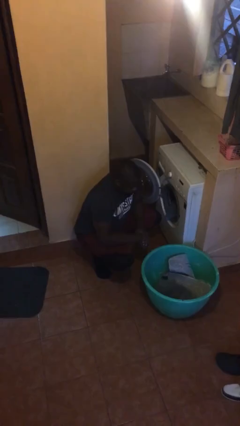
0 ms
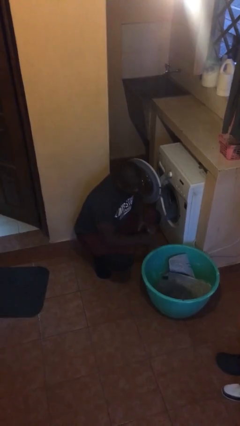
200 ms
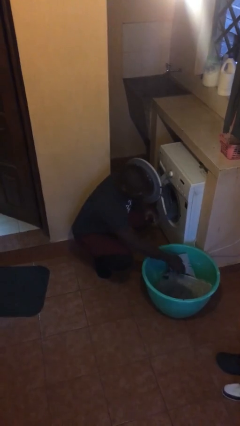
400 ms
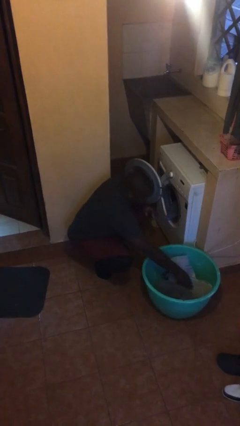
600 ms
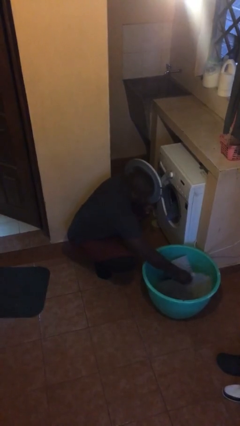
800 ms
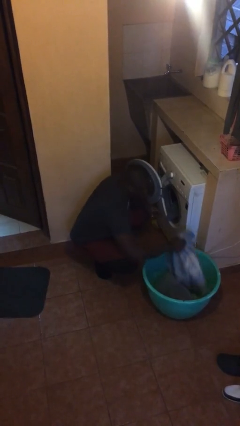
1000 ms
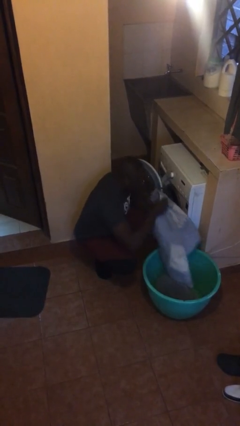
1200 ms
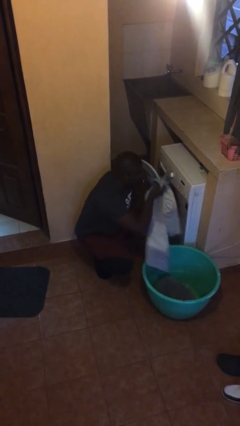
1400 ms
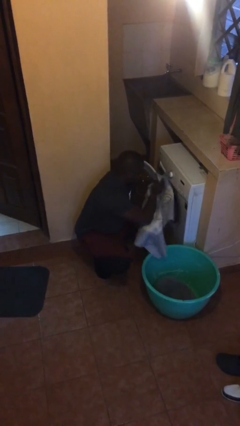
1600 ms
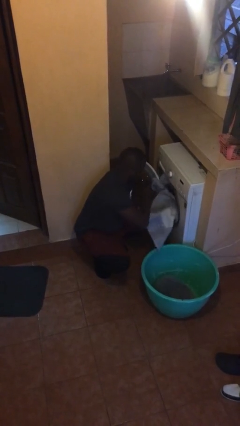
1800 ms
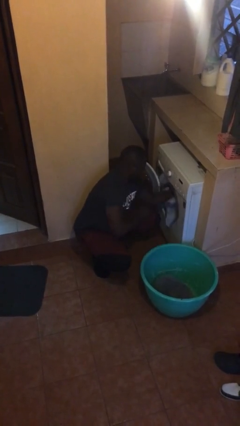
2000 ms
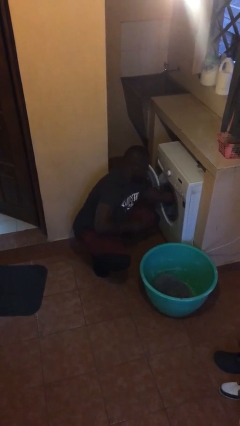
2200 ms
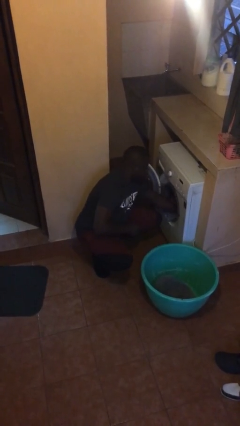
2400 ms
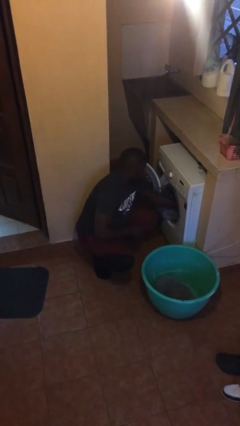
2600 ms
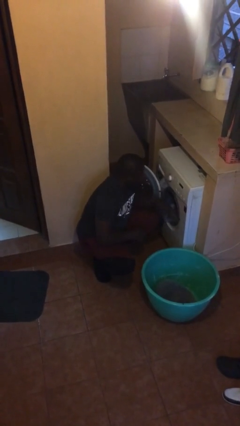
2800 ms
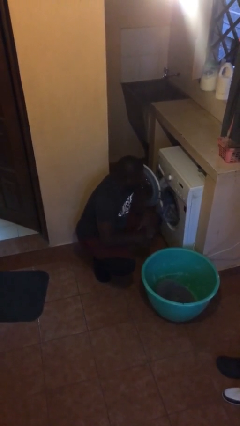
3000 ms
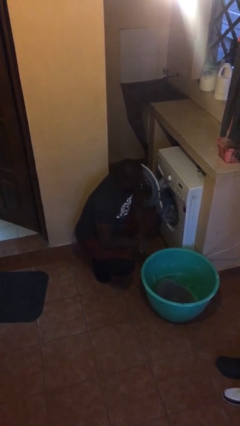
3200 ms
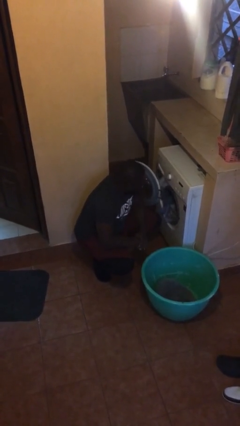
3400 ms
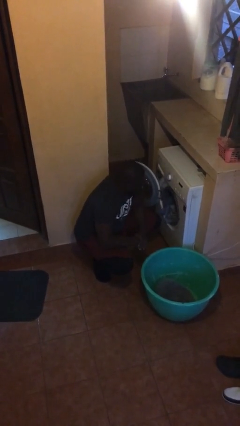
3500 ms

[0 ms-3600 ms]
person loads clotheswasher

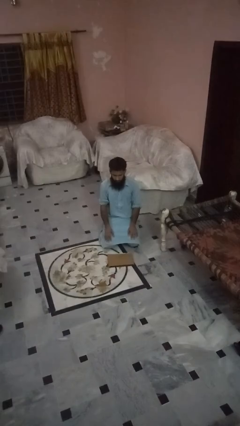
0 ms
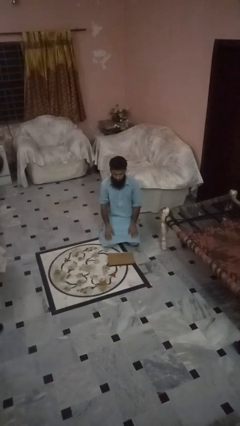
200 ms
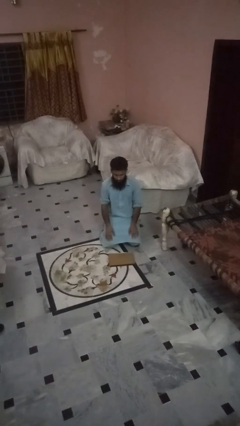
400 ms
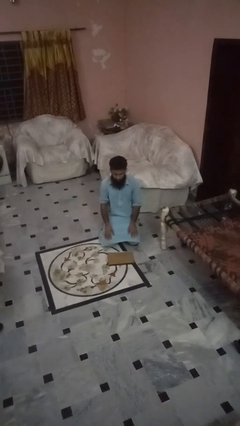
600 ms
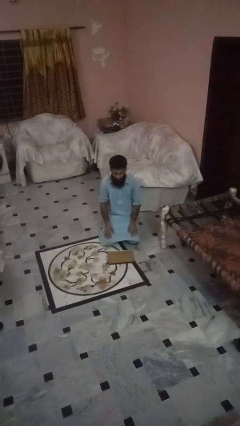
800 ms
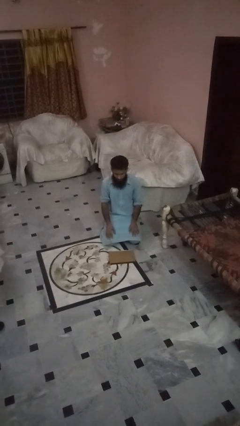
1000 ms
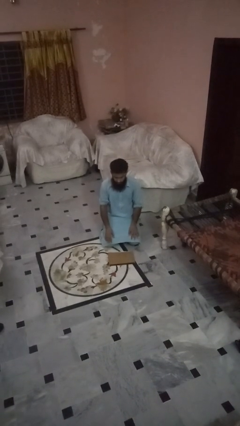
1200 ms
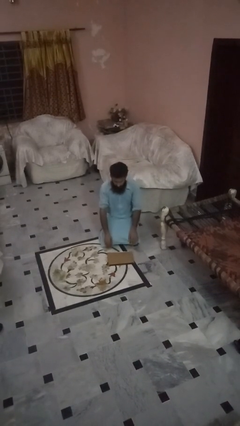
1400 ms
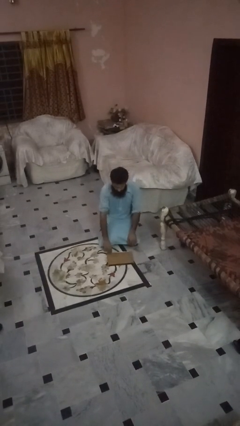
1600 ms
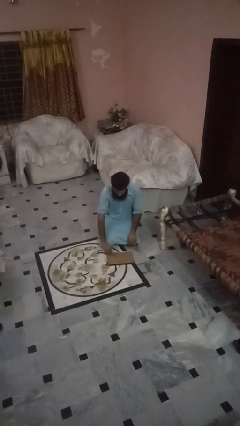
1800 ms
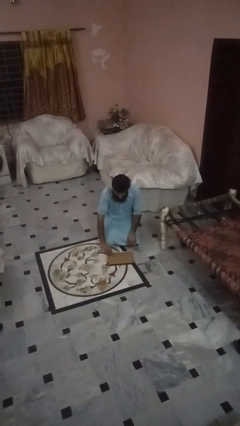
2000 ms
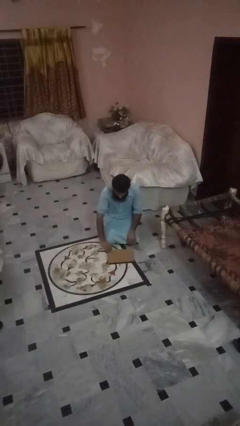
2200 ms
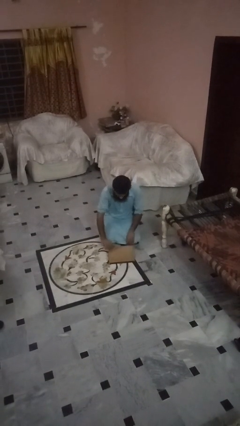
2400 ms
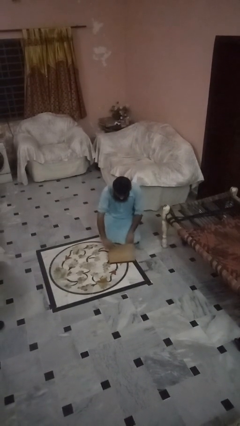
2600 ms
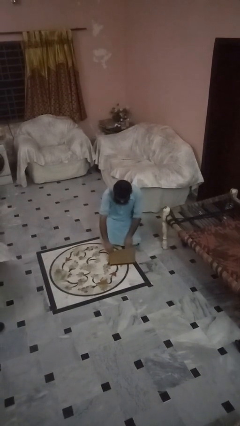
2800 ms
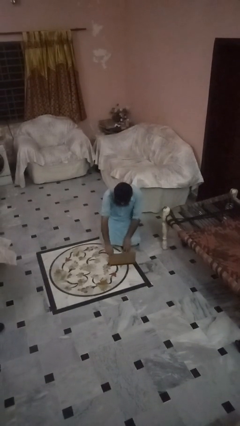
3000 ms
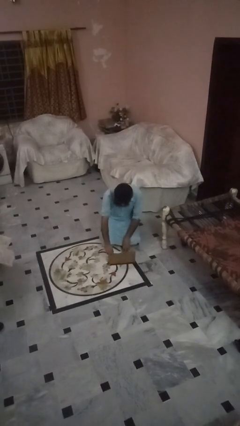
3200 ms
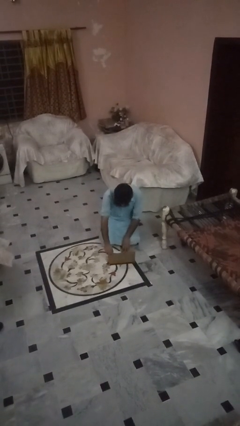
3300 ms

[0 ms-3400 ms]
person opens laptop

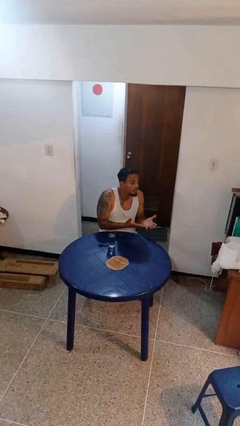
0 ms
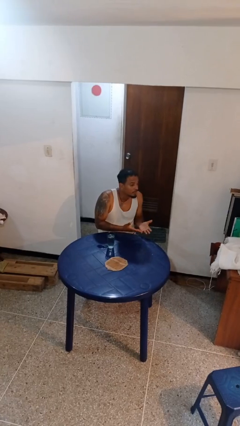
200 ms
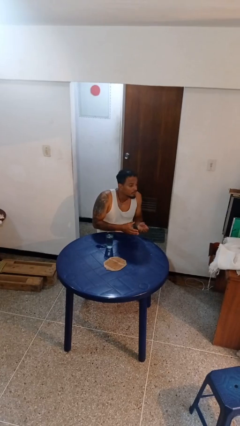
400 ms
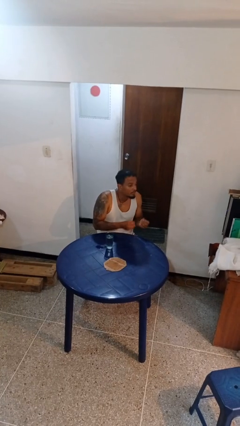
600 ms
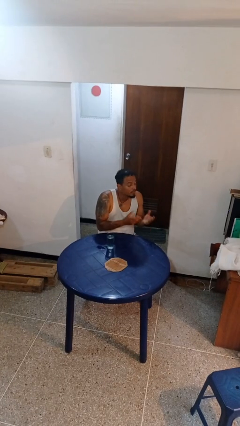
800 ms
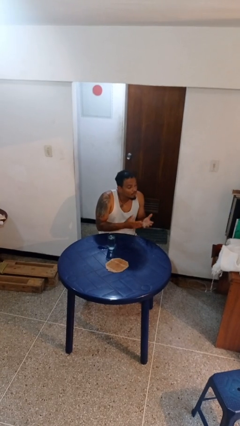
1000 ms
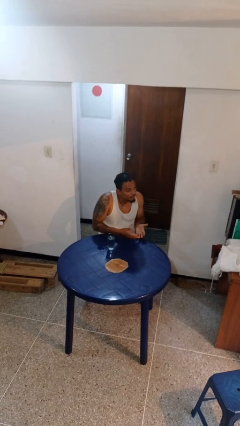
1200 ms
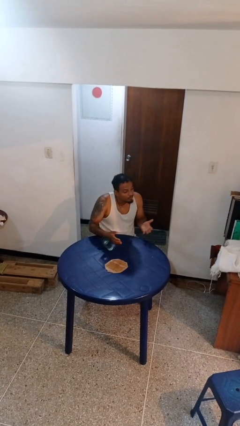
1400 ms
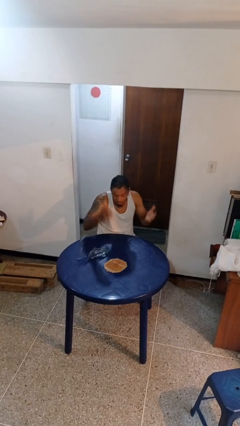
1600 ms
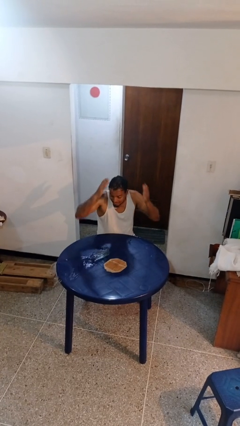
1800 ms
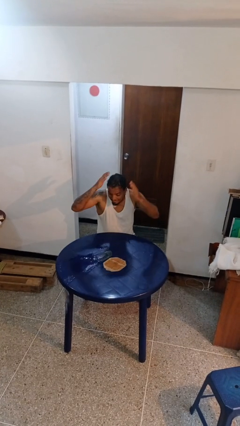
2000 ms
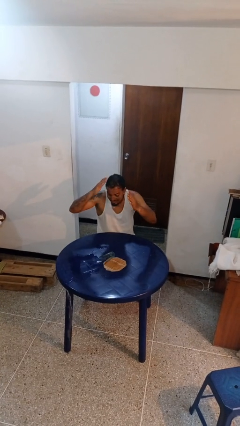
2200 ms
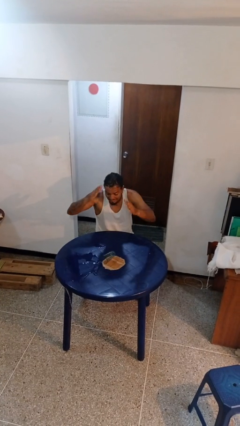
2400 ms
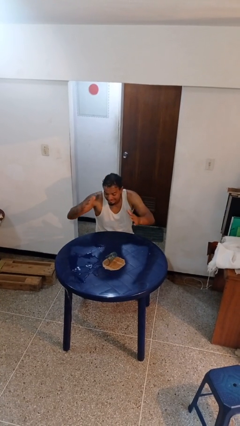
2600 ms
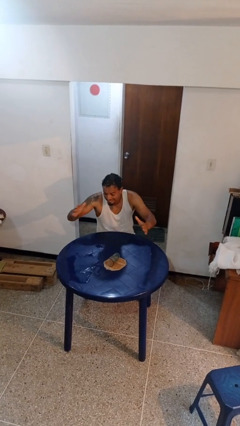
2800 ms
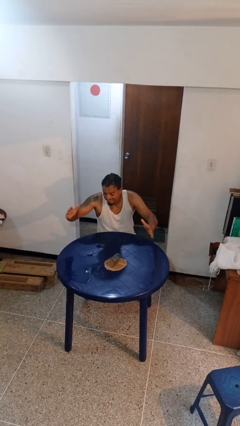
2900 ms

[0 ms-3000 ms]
person spills on table

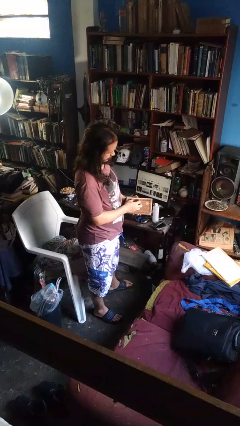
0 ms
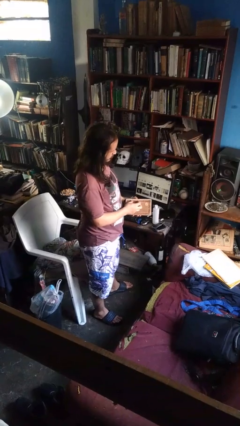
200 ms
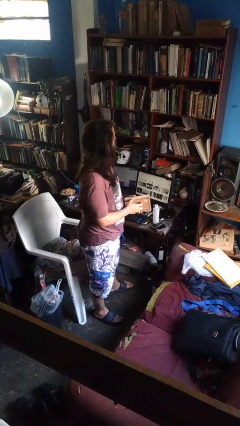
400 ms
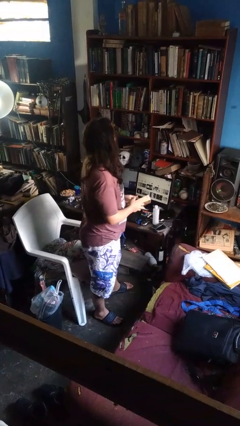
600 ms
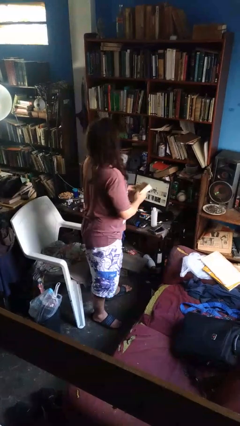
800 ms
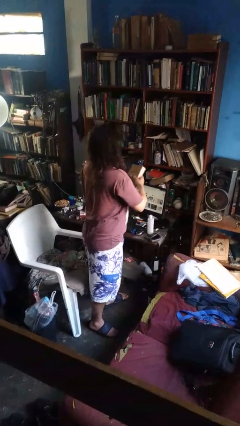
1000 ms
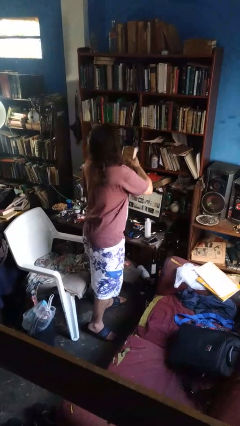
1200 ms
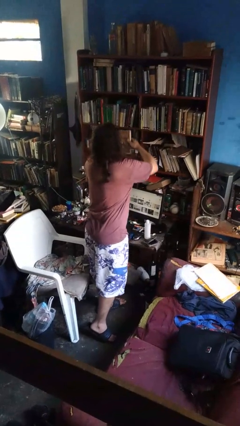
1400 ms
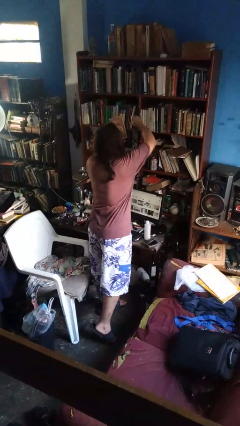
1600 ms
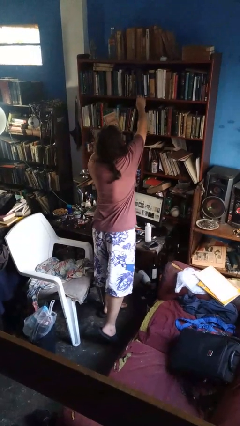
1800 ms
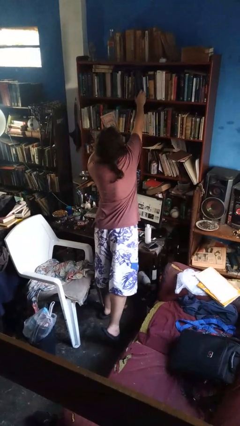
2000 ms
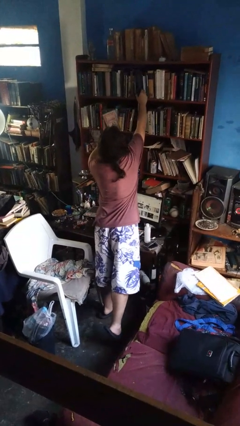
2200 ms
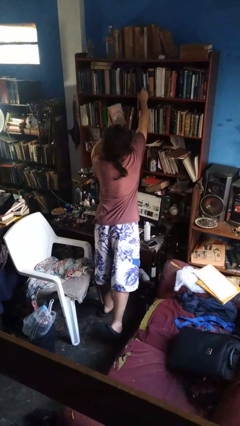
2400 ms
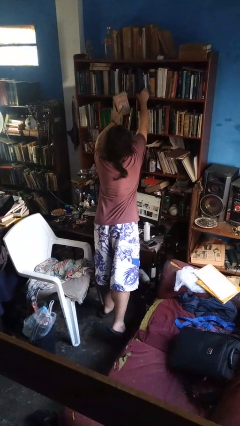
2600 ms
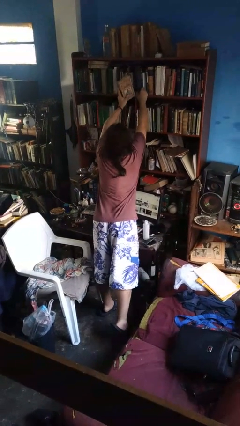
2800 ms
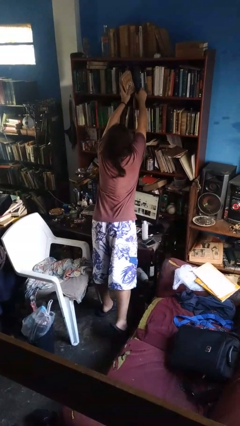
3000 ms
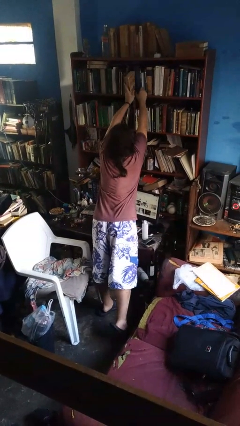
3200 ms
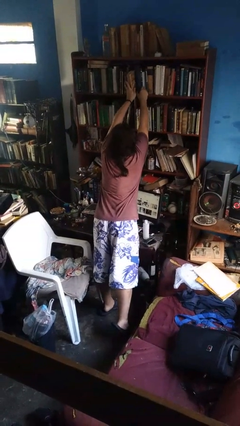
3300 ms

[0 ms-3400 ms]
person puts down object on shelf

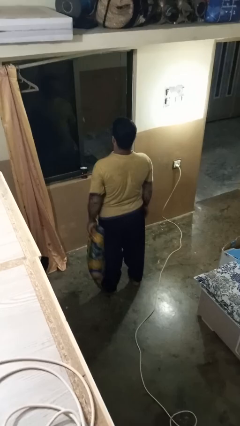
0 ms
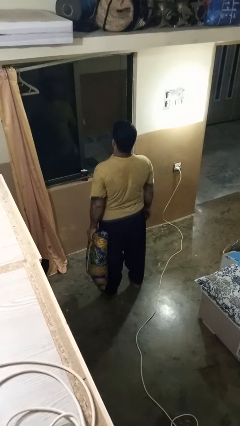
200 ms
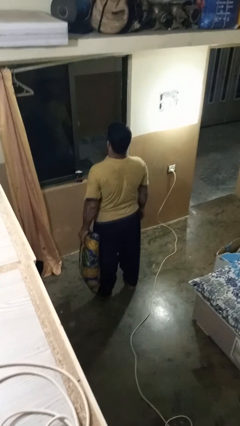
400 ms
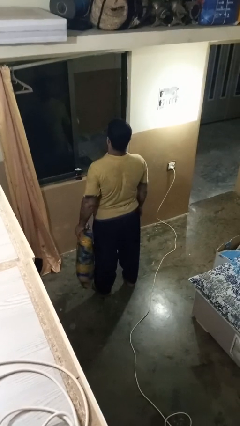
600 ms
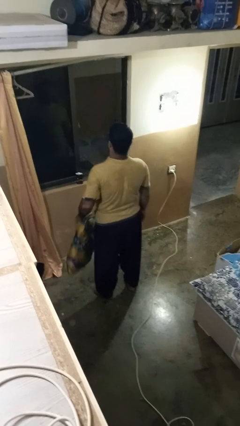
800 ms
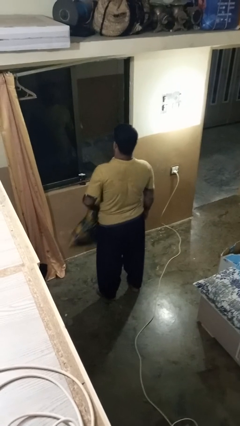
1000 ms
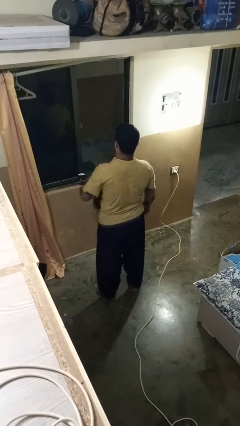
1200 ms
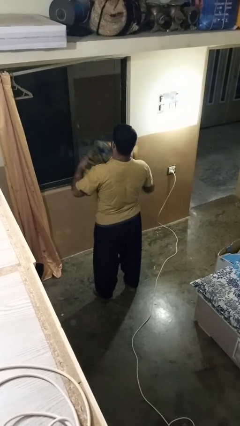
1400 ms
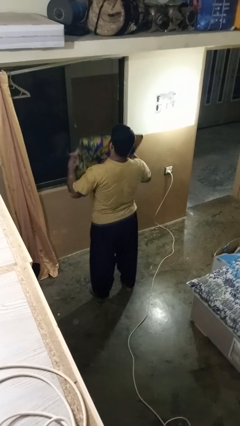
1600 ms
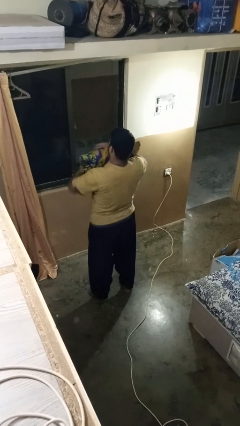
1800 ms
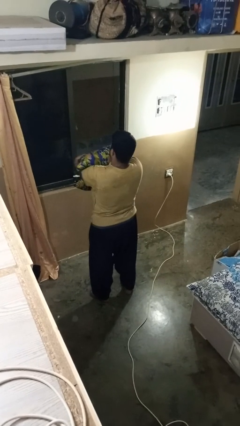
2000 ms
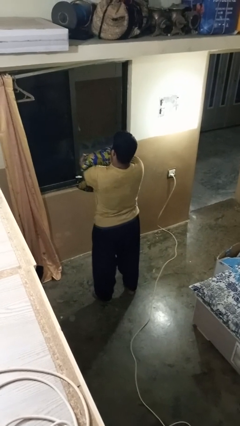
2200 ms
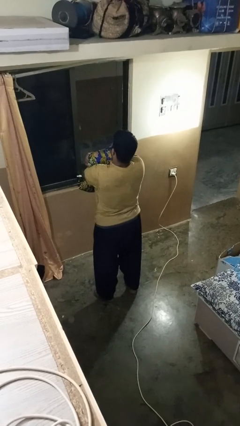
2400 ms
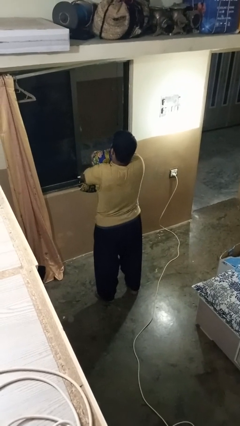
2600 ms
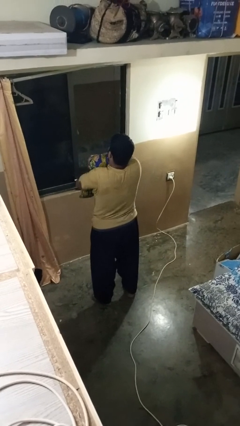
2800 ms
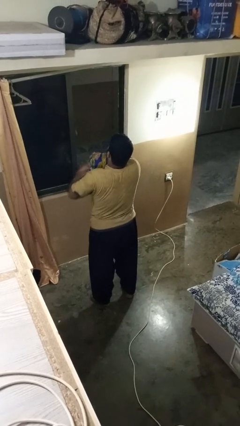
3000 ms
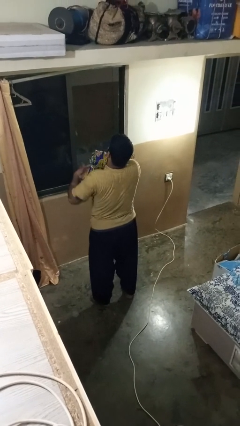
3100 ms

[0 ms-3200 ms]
person squeezes object

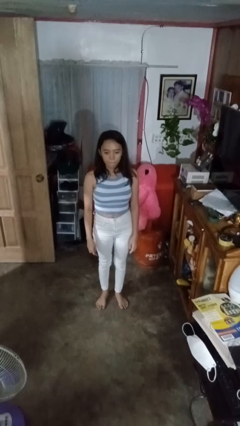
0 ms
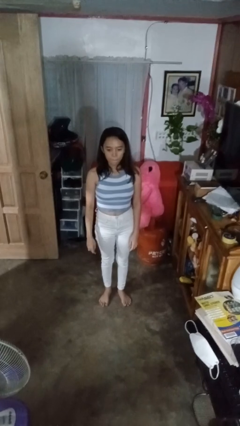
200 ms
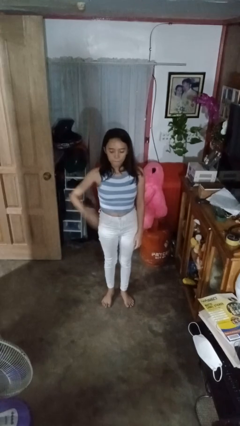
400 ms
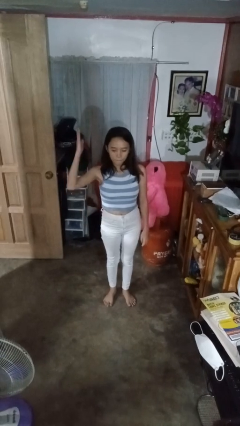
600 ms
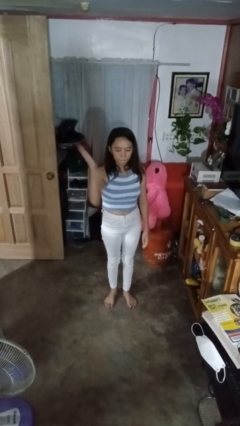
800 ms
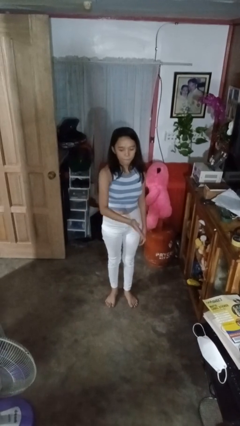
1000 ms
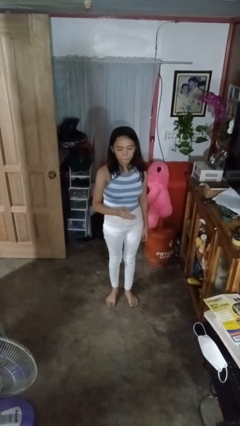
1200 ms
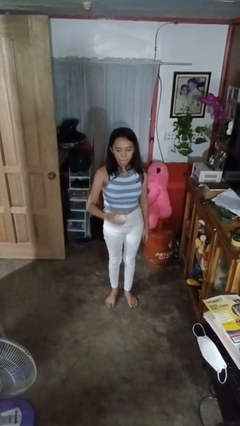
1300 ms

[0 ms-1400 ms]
person karate chop
